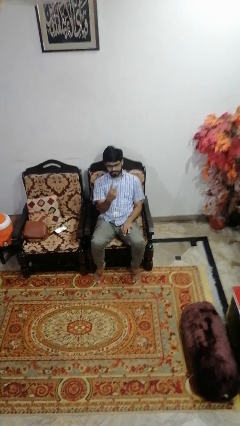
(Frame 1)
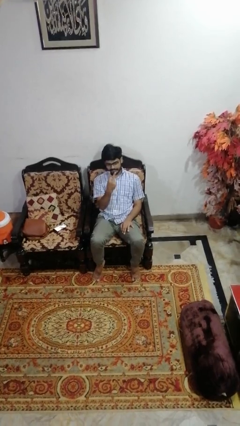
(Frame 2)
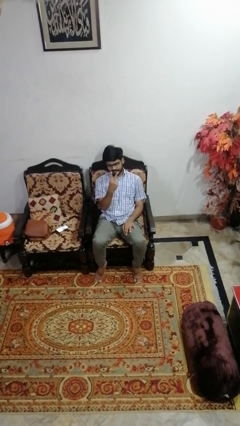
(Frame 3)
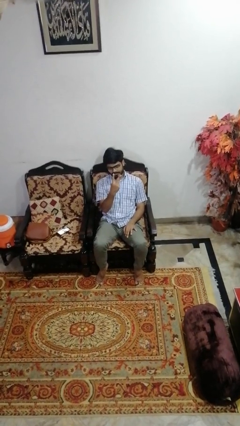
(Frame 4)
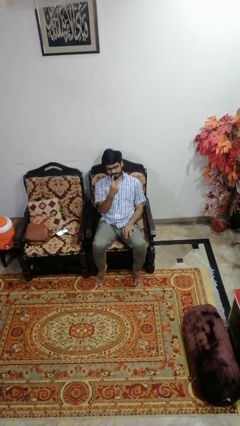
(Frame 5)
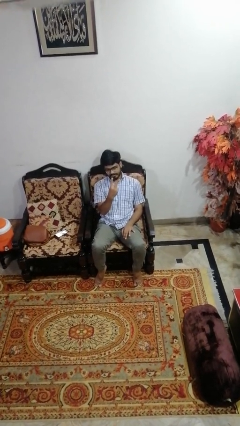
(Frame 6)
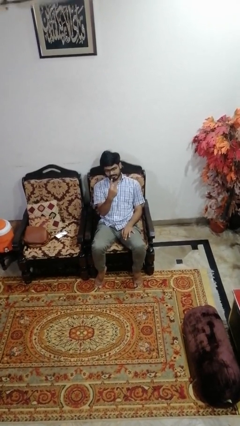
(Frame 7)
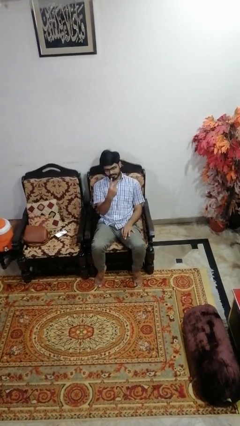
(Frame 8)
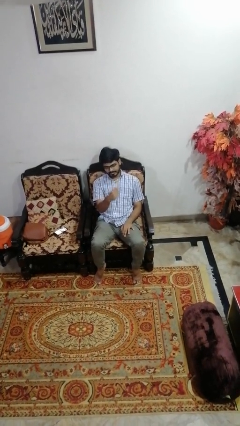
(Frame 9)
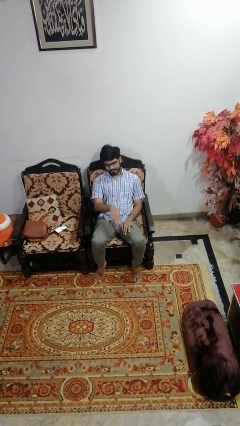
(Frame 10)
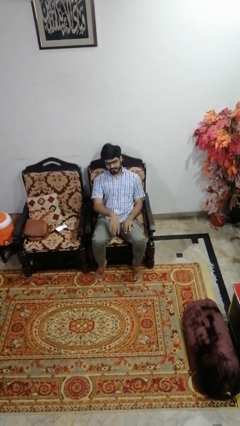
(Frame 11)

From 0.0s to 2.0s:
person gestures peace

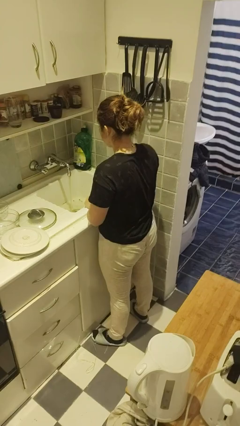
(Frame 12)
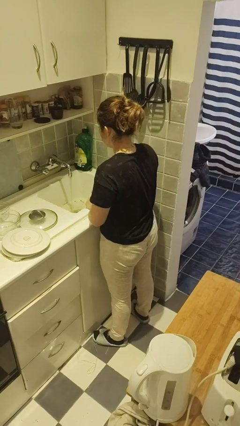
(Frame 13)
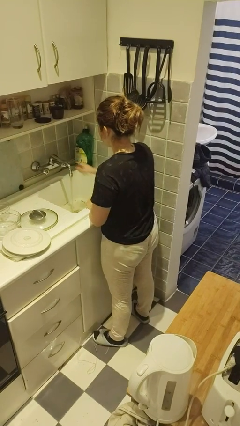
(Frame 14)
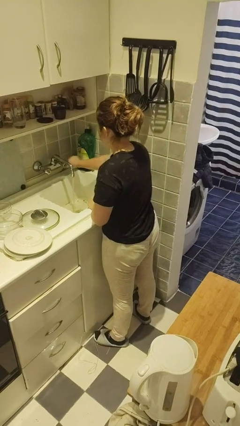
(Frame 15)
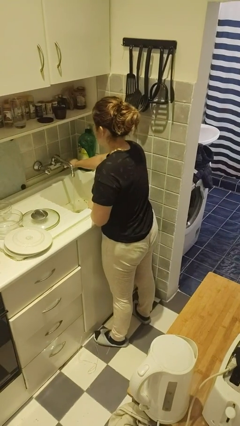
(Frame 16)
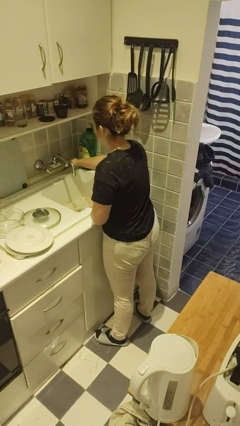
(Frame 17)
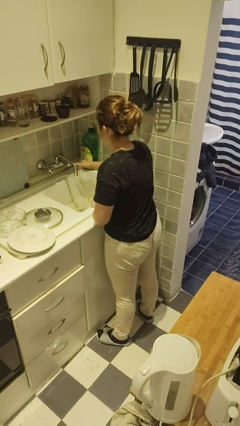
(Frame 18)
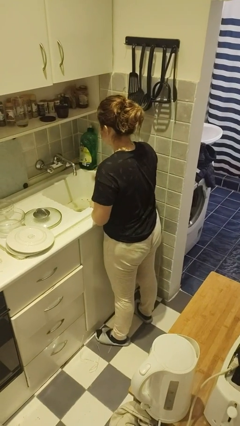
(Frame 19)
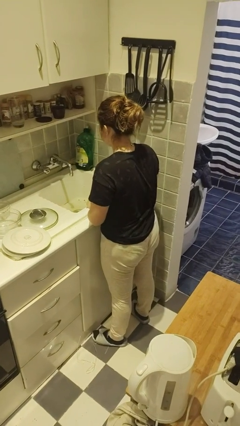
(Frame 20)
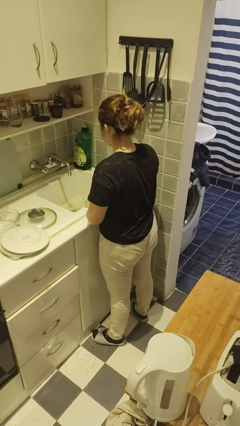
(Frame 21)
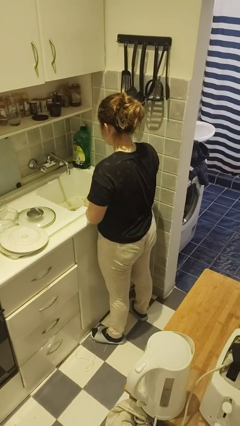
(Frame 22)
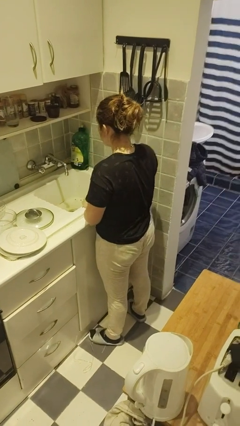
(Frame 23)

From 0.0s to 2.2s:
person turns off faucet

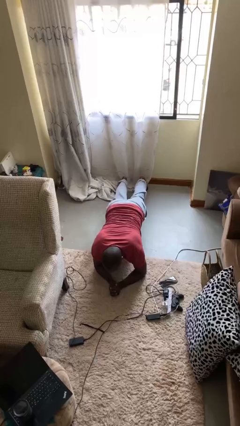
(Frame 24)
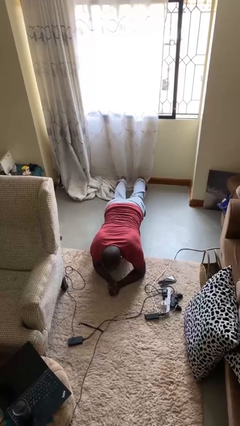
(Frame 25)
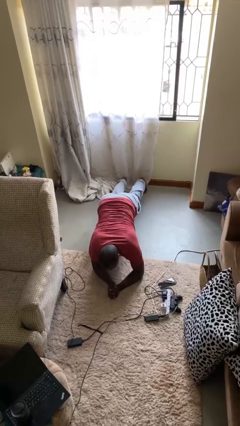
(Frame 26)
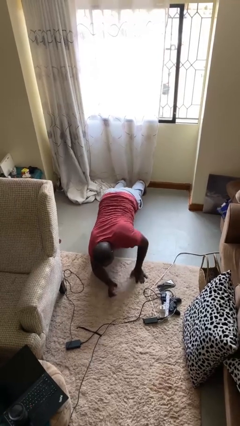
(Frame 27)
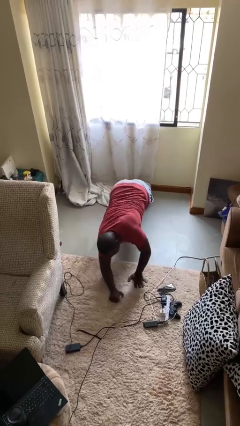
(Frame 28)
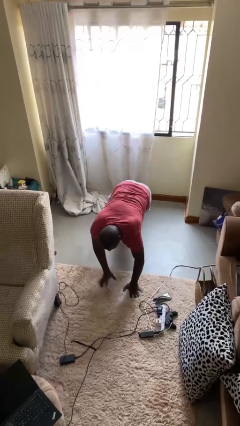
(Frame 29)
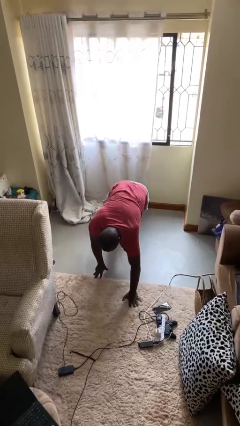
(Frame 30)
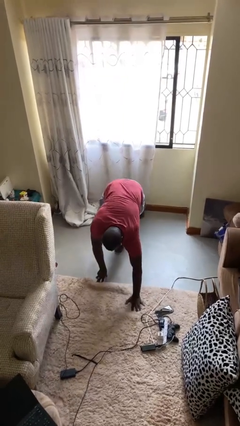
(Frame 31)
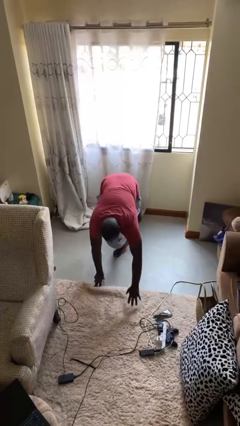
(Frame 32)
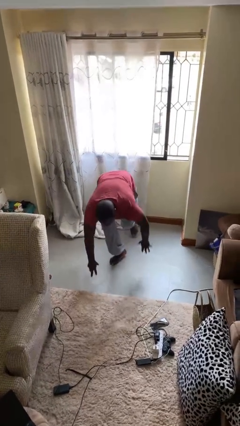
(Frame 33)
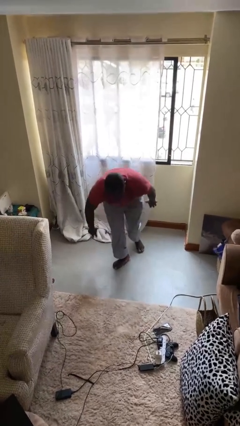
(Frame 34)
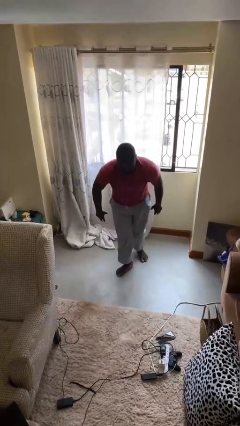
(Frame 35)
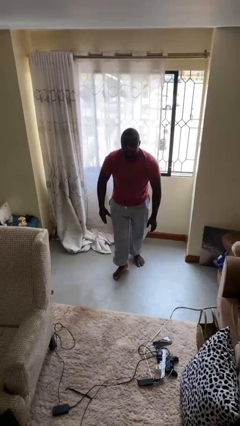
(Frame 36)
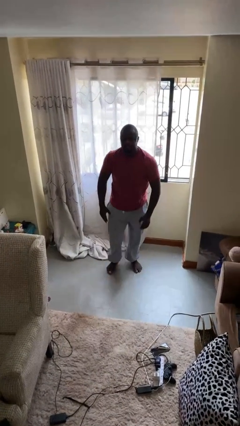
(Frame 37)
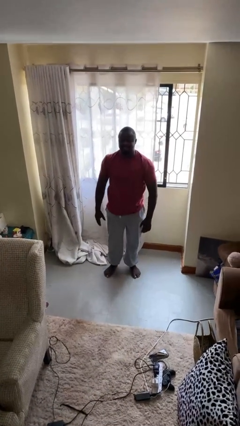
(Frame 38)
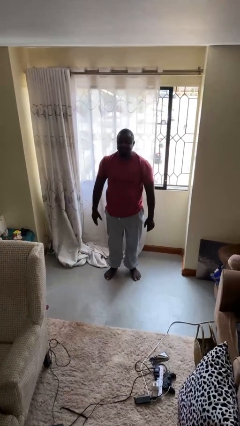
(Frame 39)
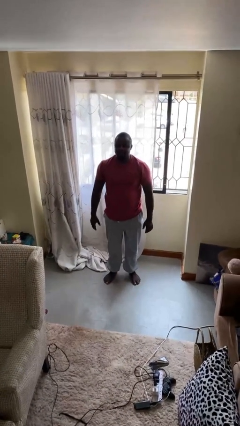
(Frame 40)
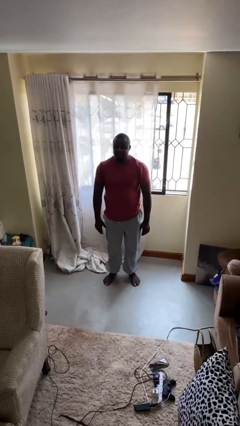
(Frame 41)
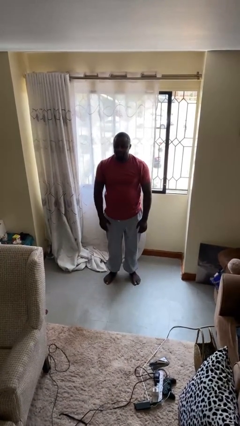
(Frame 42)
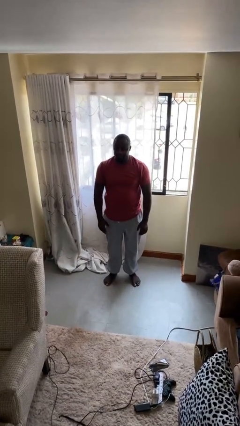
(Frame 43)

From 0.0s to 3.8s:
person stands up from floor

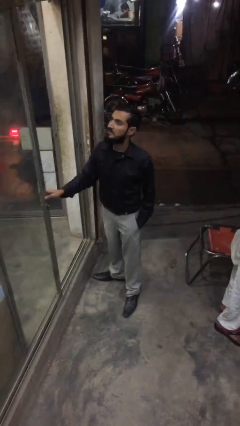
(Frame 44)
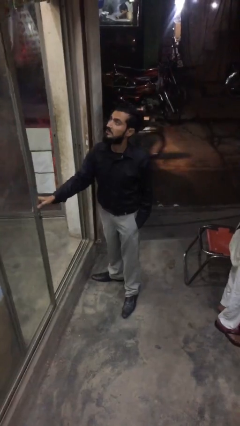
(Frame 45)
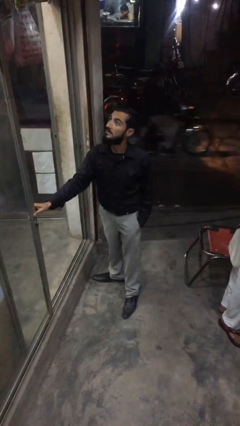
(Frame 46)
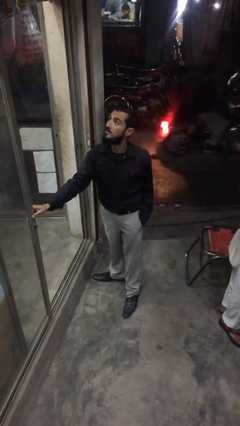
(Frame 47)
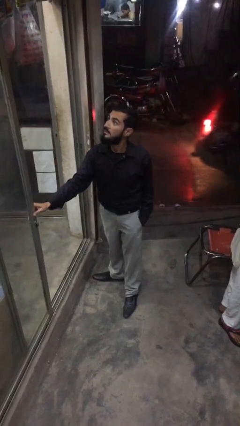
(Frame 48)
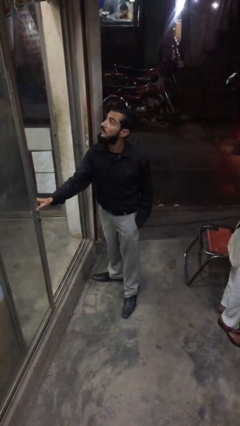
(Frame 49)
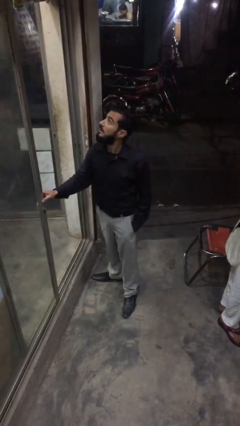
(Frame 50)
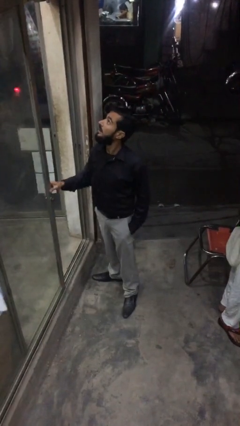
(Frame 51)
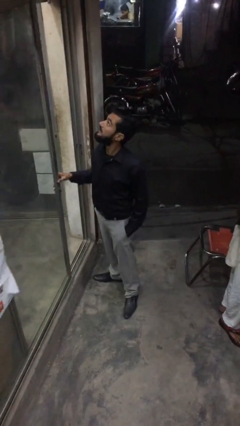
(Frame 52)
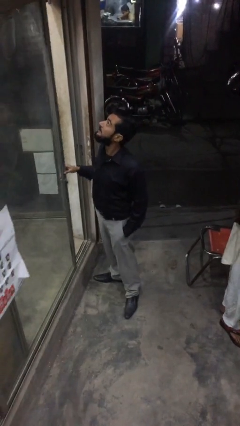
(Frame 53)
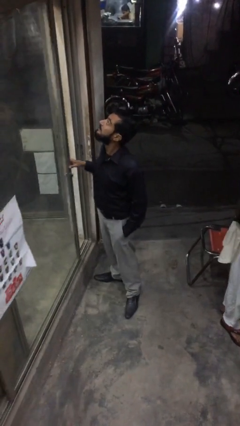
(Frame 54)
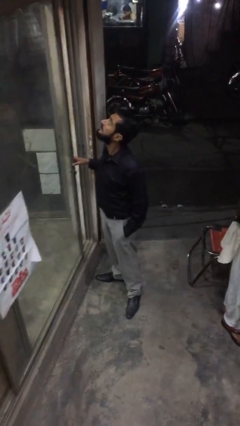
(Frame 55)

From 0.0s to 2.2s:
person closes facility door

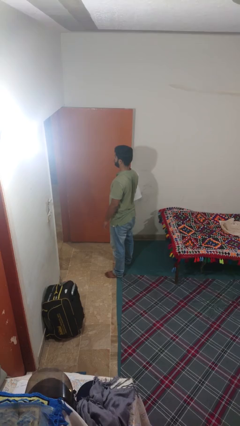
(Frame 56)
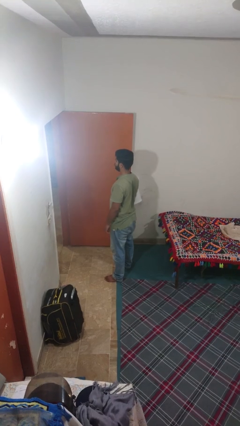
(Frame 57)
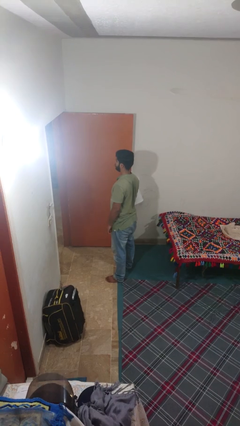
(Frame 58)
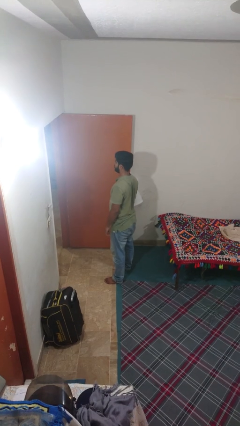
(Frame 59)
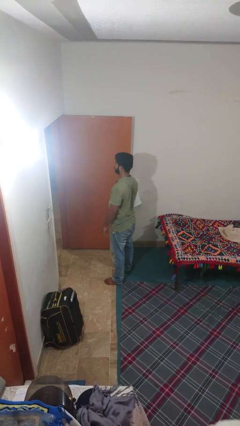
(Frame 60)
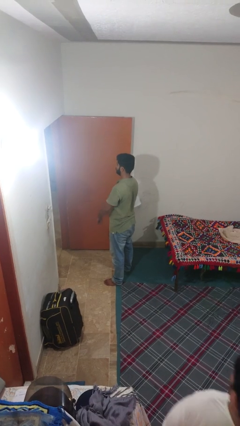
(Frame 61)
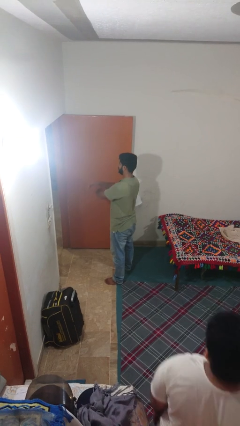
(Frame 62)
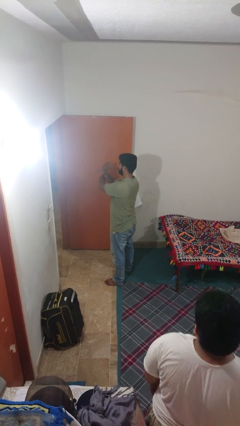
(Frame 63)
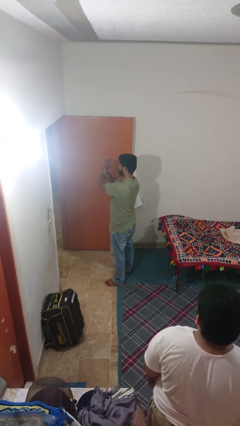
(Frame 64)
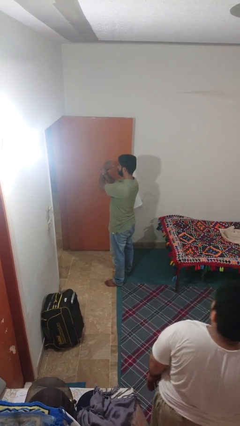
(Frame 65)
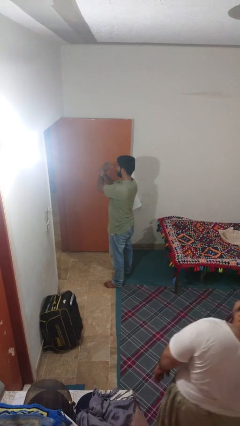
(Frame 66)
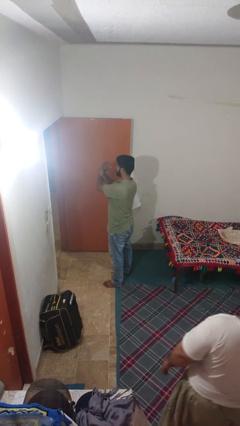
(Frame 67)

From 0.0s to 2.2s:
person crosses arms

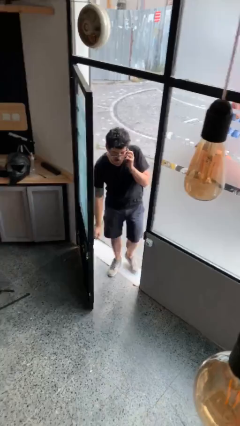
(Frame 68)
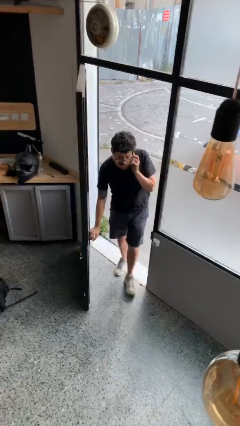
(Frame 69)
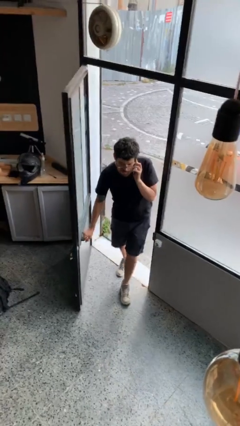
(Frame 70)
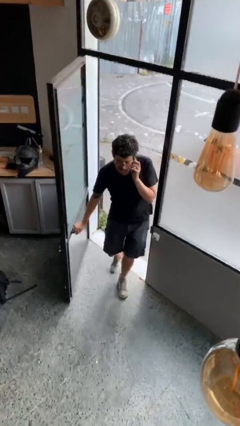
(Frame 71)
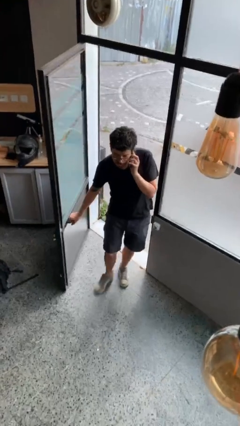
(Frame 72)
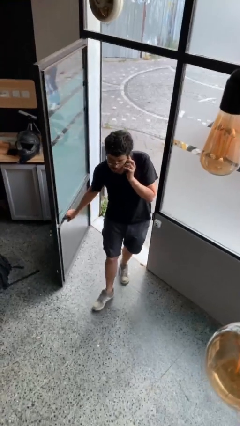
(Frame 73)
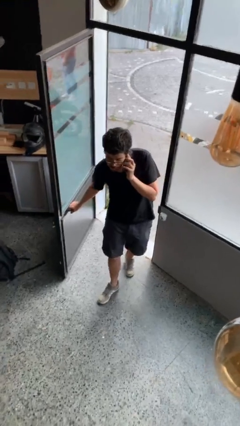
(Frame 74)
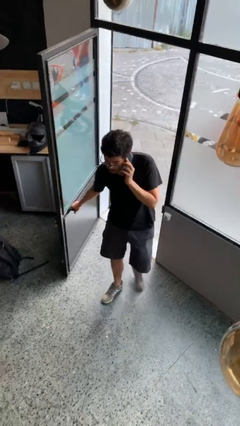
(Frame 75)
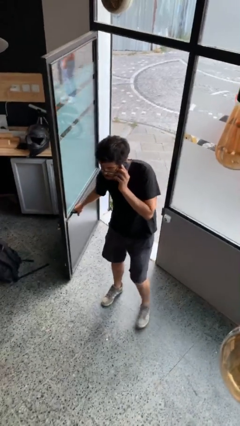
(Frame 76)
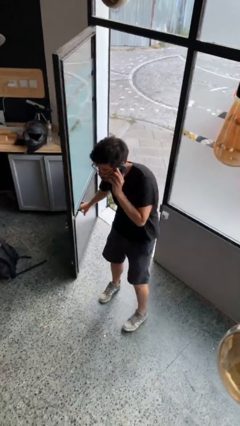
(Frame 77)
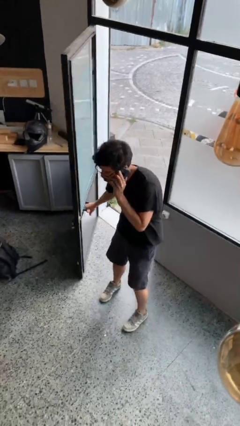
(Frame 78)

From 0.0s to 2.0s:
person enters scene through structure

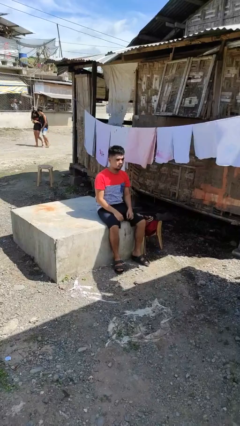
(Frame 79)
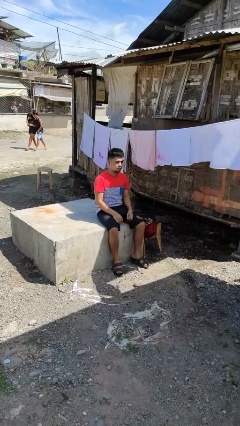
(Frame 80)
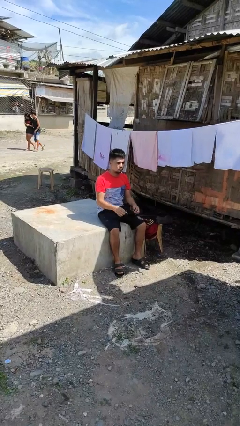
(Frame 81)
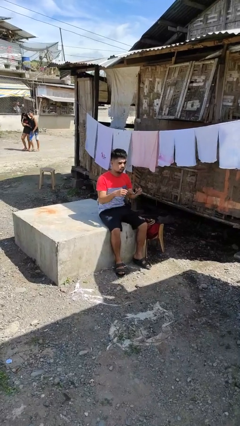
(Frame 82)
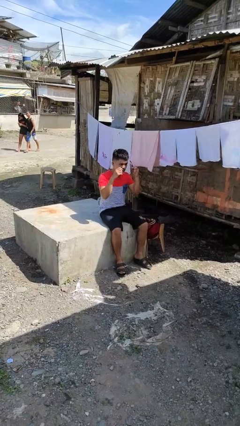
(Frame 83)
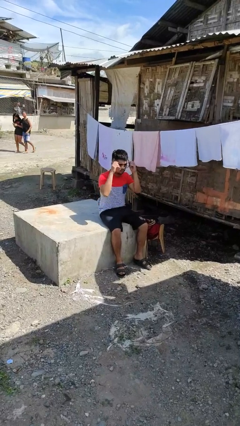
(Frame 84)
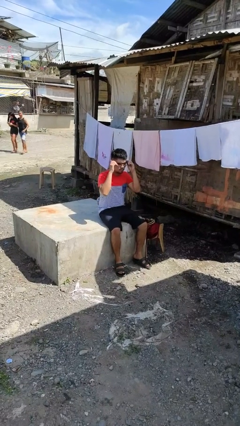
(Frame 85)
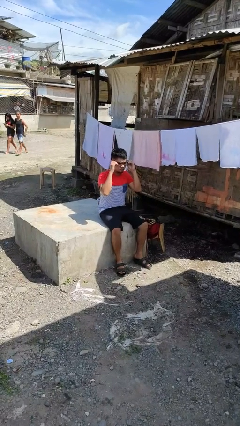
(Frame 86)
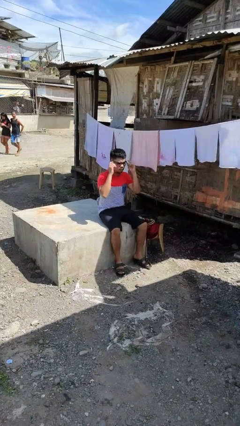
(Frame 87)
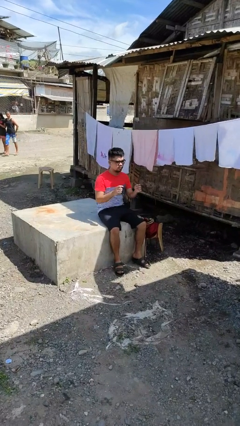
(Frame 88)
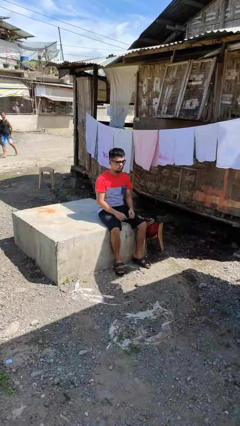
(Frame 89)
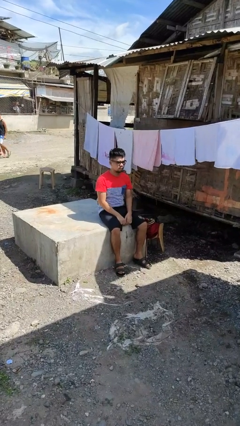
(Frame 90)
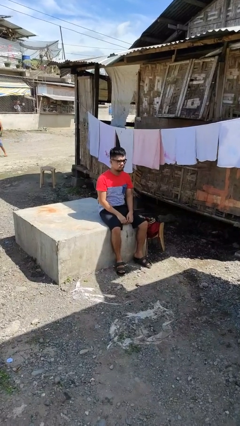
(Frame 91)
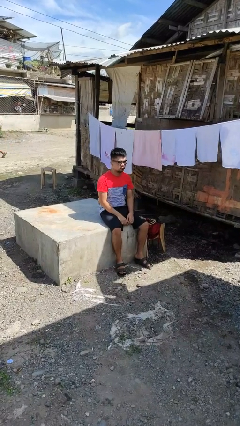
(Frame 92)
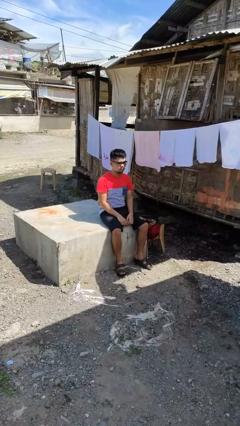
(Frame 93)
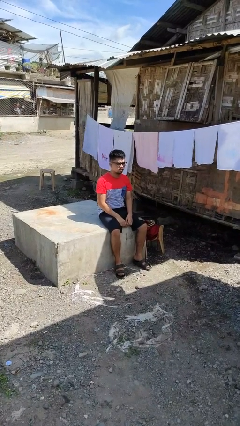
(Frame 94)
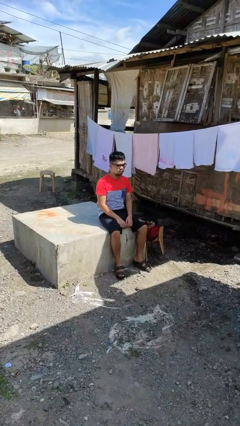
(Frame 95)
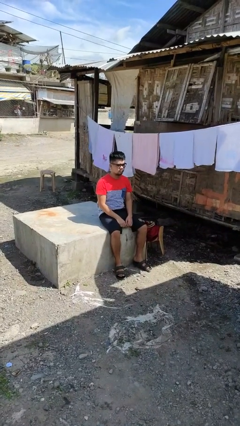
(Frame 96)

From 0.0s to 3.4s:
person puts on glasses
